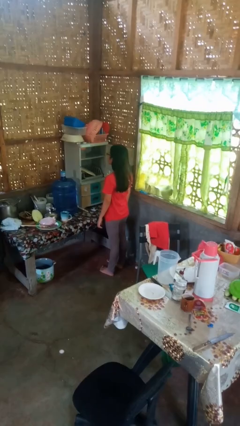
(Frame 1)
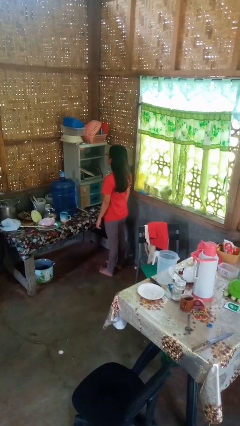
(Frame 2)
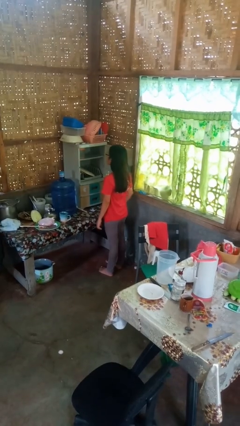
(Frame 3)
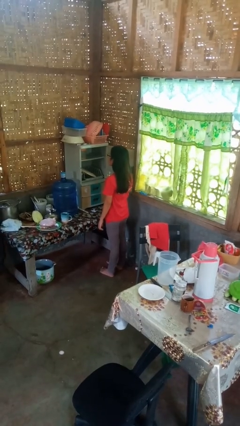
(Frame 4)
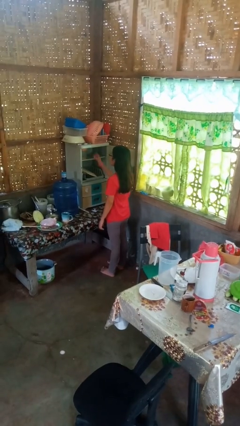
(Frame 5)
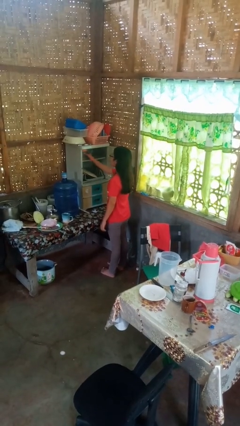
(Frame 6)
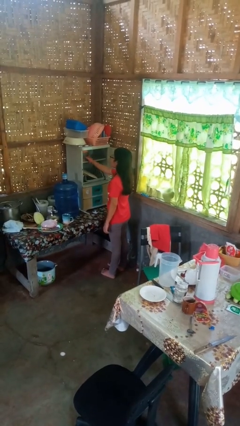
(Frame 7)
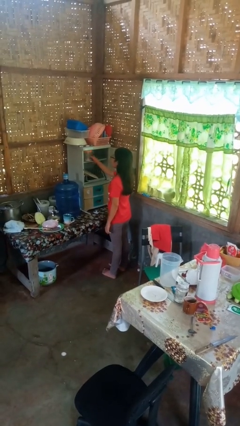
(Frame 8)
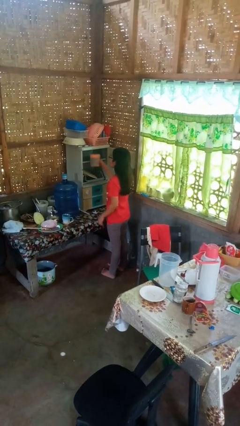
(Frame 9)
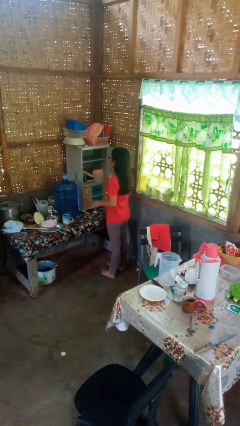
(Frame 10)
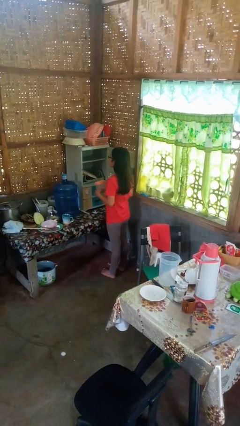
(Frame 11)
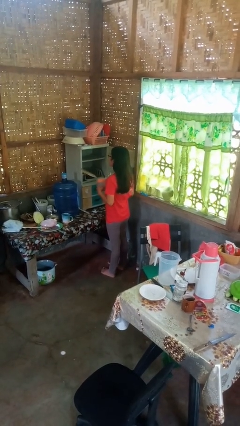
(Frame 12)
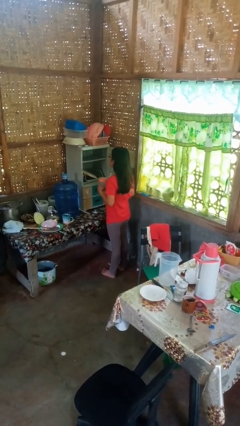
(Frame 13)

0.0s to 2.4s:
person picks up object from cabinet

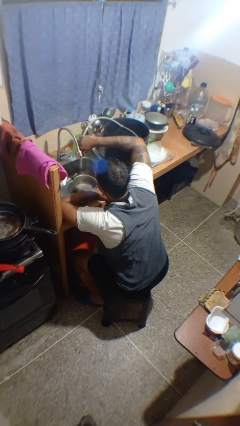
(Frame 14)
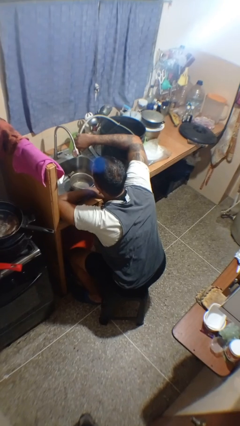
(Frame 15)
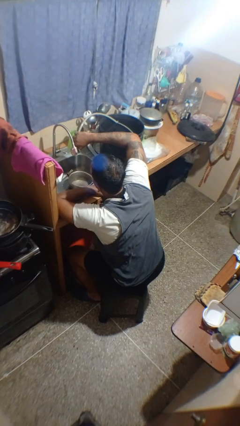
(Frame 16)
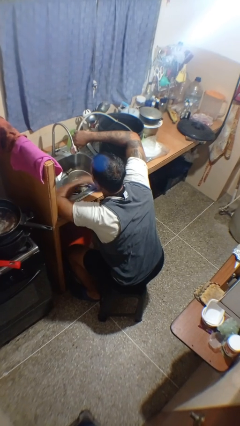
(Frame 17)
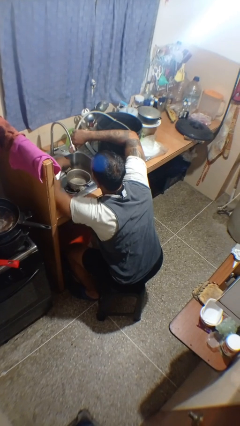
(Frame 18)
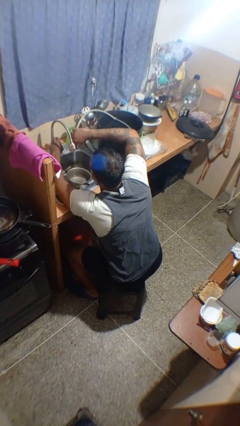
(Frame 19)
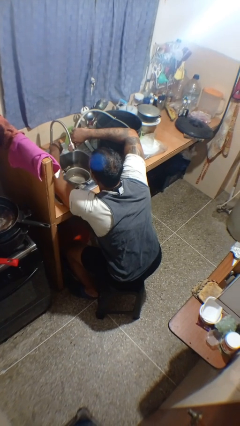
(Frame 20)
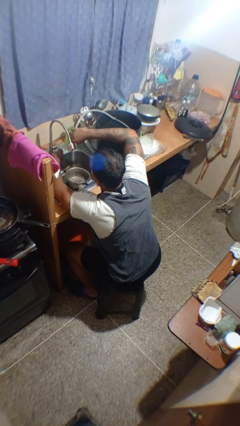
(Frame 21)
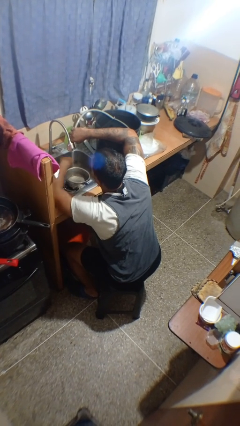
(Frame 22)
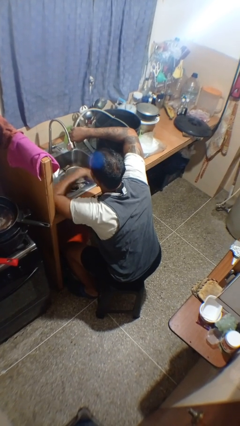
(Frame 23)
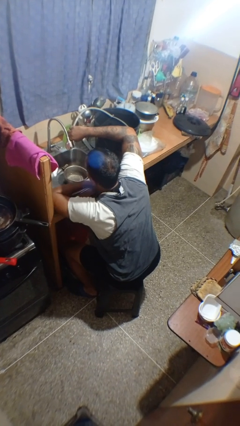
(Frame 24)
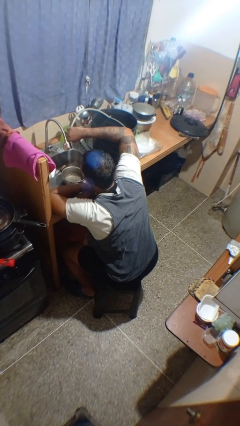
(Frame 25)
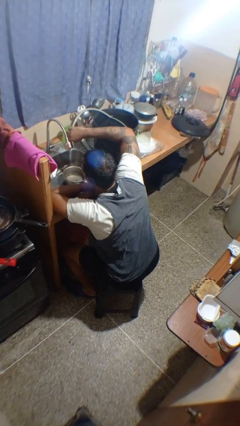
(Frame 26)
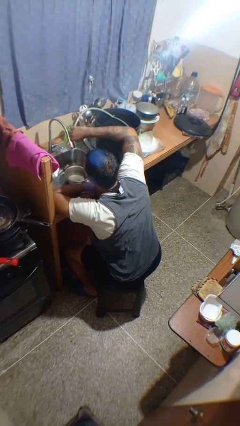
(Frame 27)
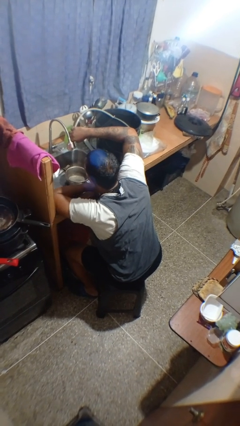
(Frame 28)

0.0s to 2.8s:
person turns on faucet

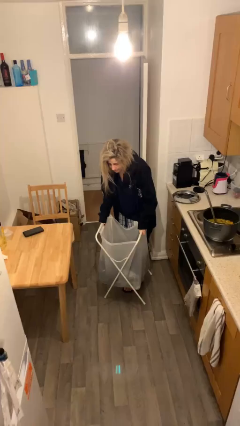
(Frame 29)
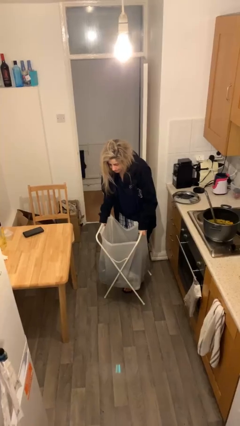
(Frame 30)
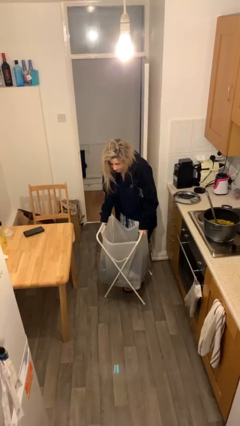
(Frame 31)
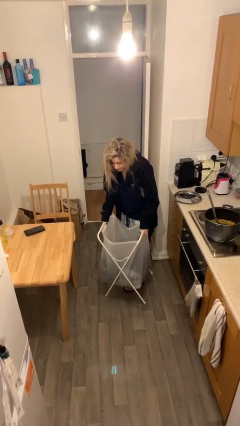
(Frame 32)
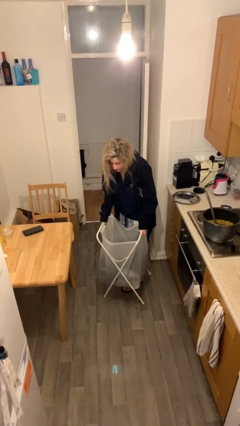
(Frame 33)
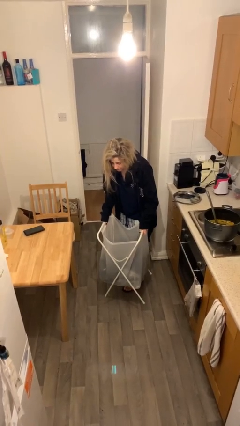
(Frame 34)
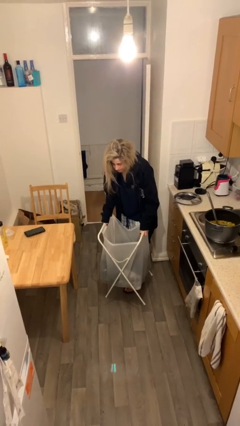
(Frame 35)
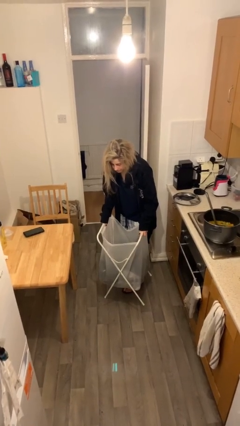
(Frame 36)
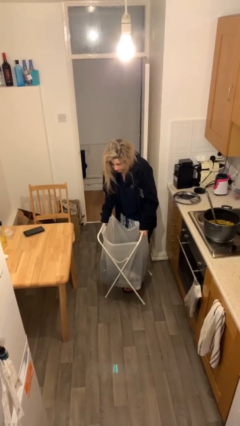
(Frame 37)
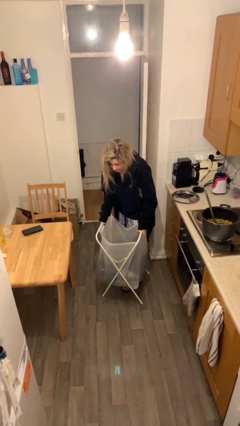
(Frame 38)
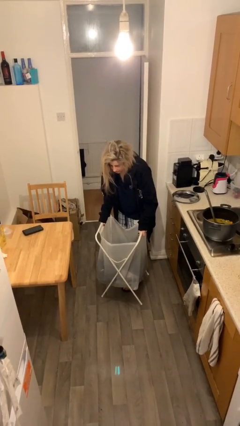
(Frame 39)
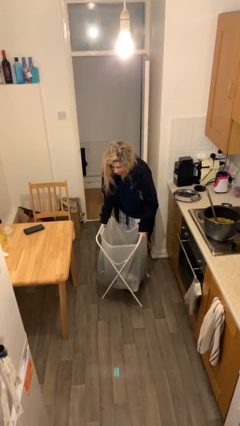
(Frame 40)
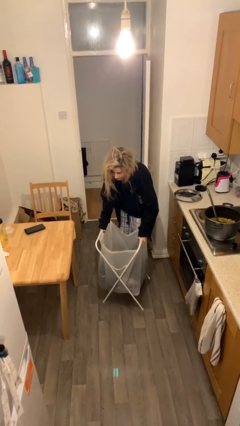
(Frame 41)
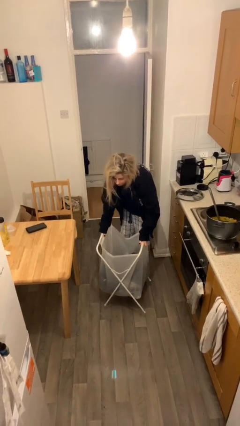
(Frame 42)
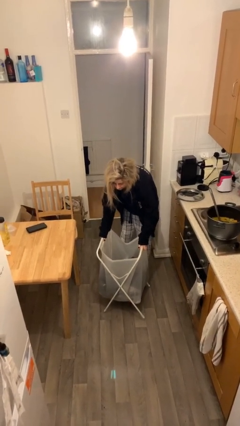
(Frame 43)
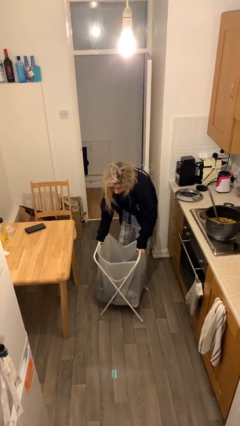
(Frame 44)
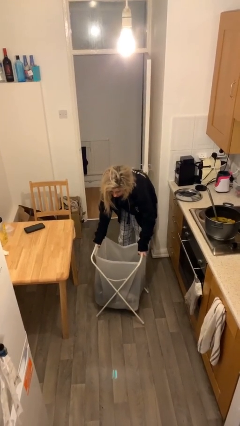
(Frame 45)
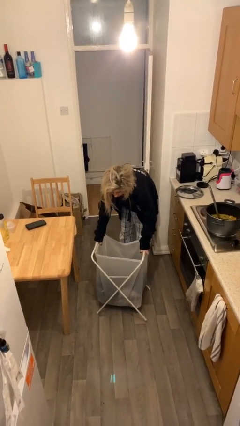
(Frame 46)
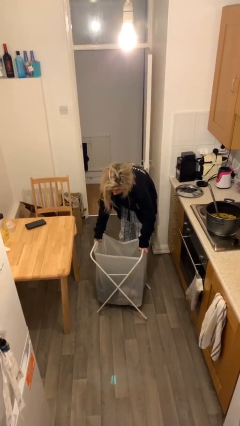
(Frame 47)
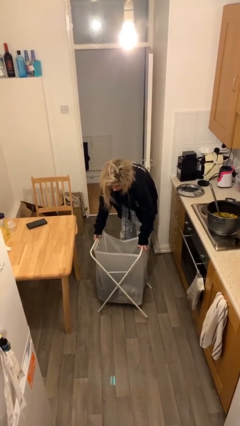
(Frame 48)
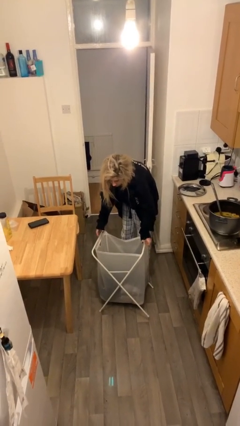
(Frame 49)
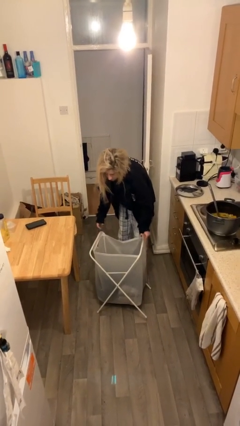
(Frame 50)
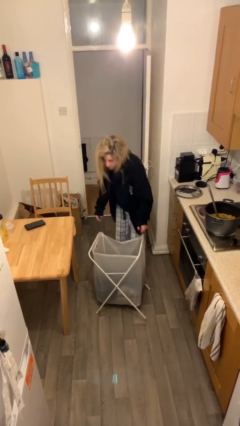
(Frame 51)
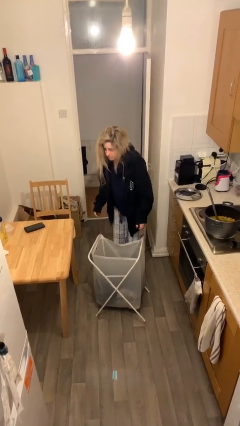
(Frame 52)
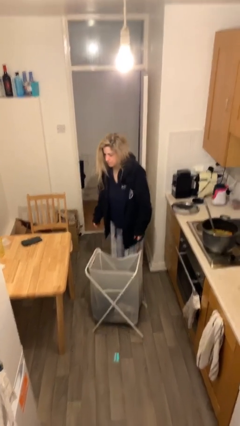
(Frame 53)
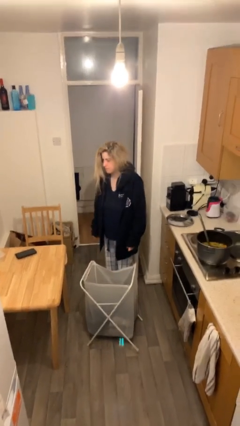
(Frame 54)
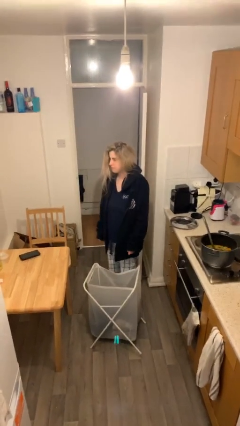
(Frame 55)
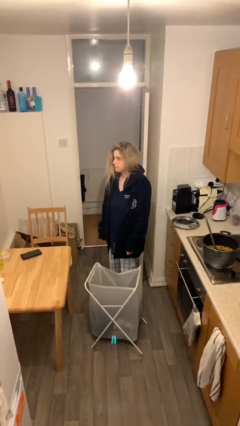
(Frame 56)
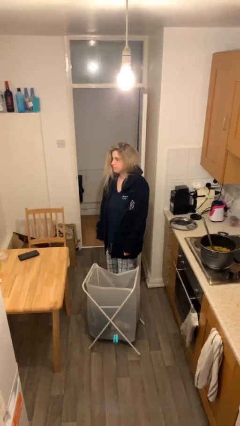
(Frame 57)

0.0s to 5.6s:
person puts down object on floor

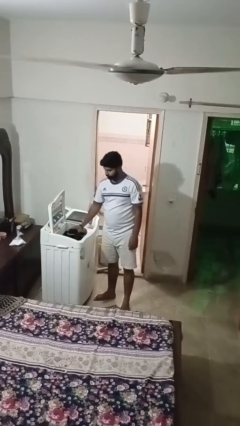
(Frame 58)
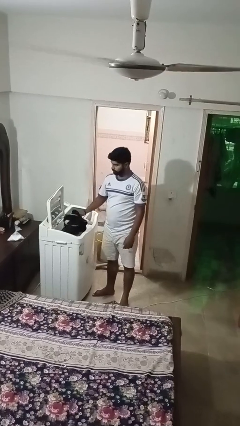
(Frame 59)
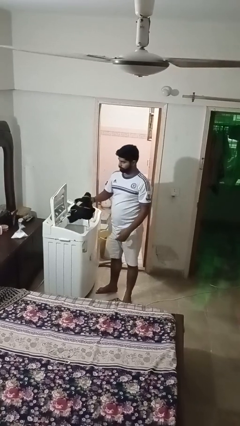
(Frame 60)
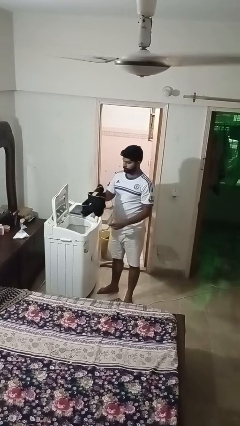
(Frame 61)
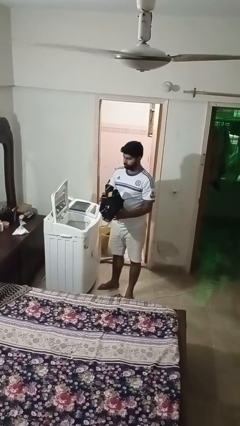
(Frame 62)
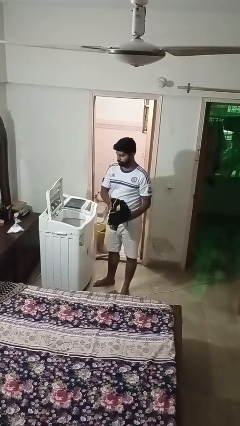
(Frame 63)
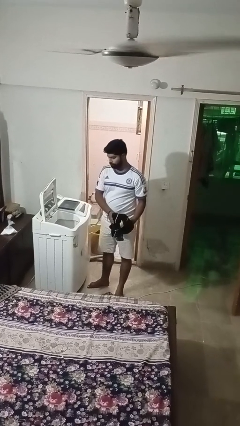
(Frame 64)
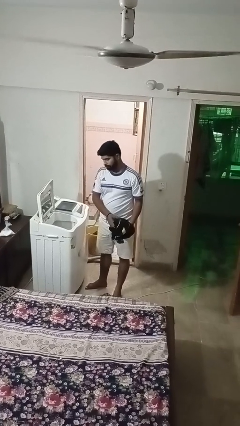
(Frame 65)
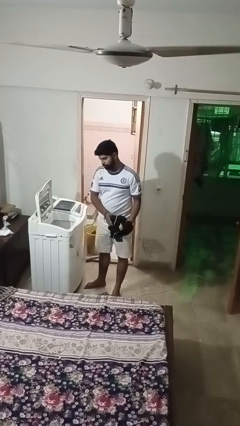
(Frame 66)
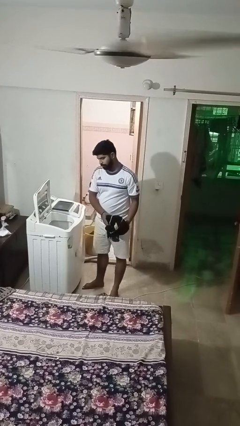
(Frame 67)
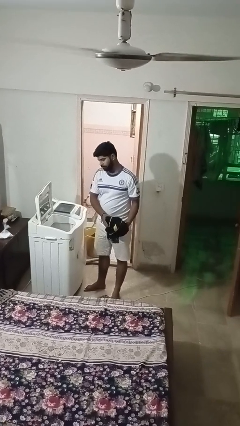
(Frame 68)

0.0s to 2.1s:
person unloads clotheswasher

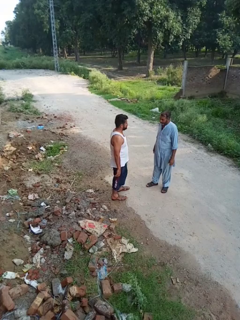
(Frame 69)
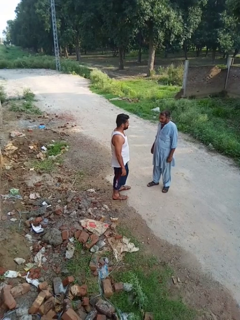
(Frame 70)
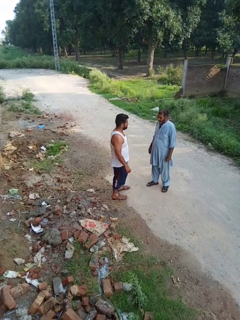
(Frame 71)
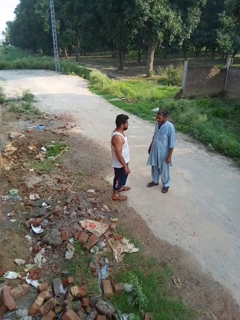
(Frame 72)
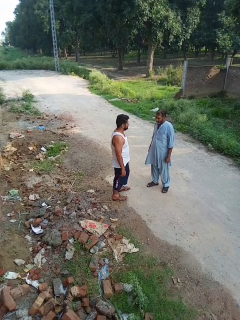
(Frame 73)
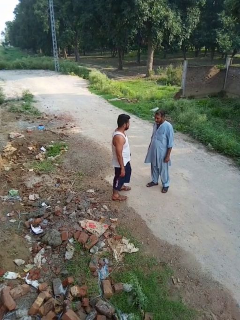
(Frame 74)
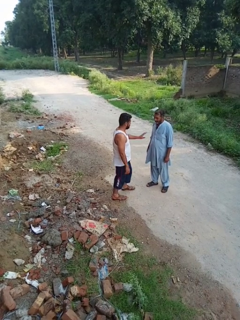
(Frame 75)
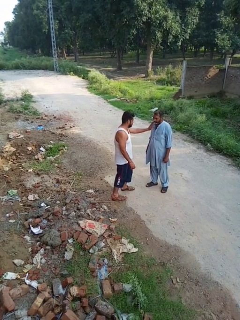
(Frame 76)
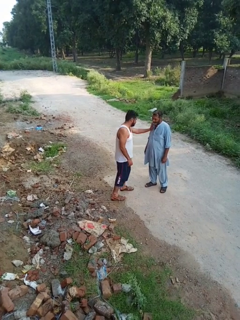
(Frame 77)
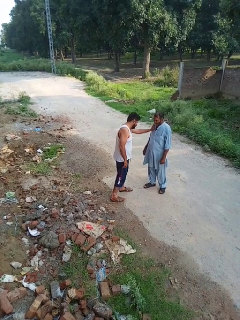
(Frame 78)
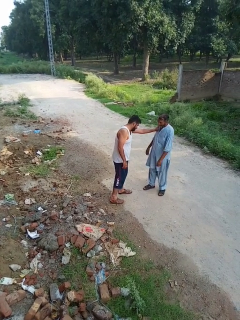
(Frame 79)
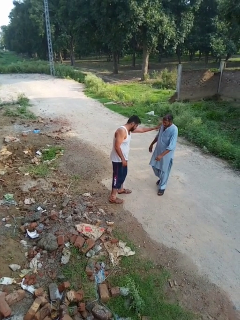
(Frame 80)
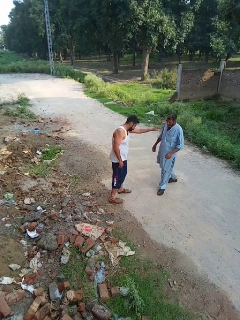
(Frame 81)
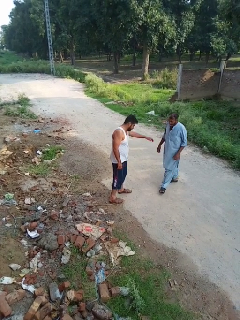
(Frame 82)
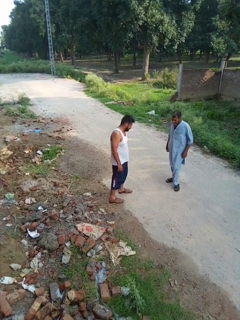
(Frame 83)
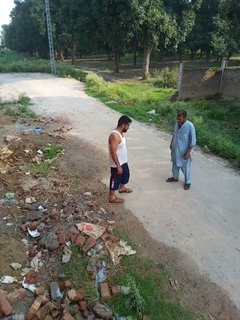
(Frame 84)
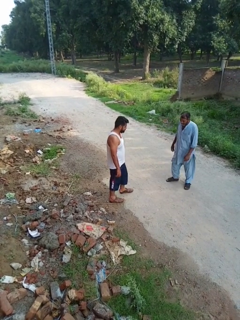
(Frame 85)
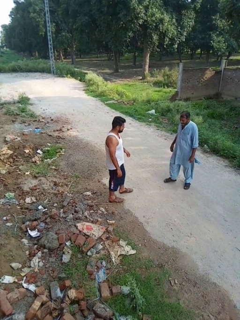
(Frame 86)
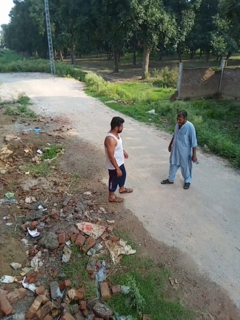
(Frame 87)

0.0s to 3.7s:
person shoves person

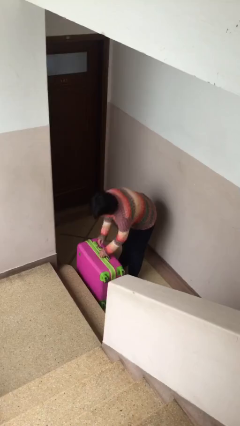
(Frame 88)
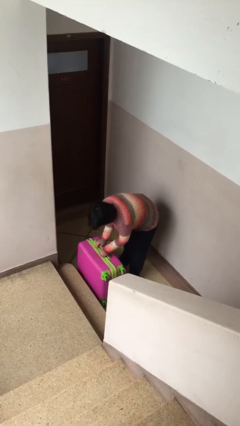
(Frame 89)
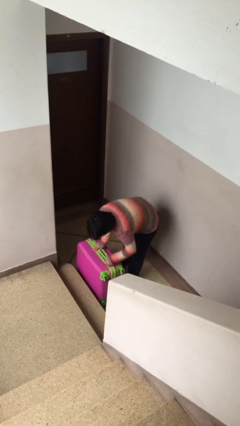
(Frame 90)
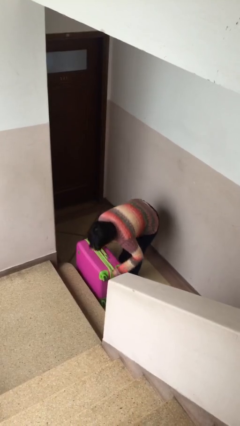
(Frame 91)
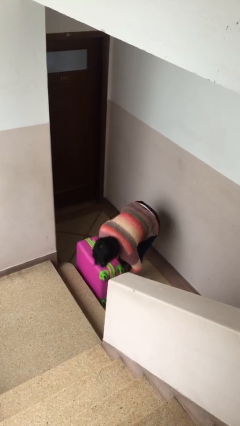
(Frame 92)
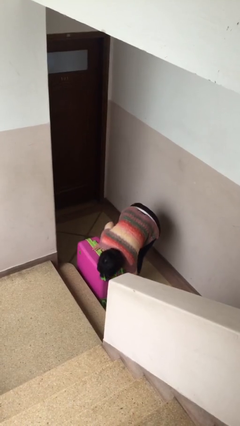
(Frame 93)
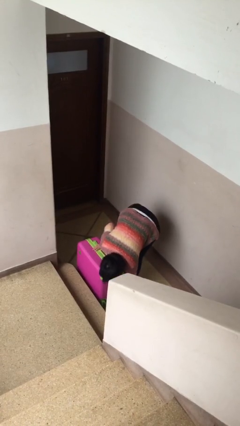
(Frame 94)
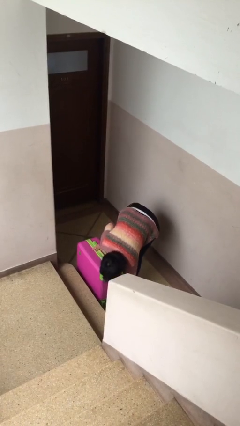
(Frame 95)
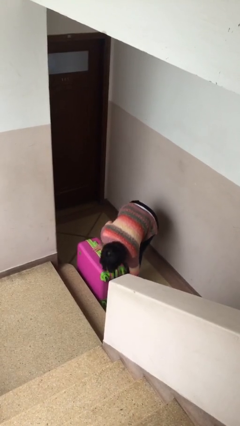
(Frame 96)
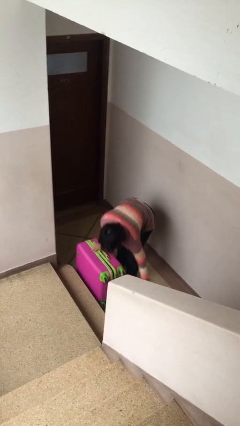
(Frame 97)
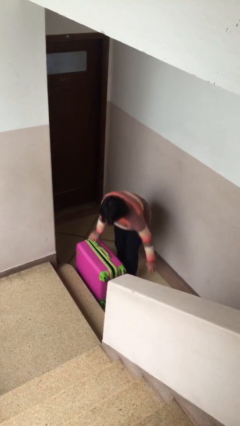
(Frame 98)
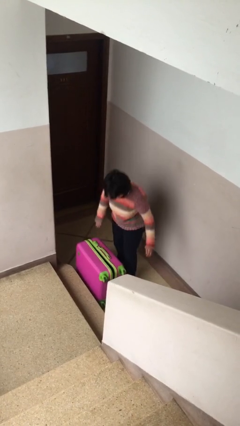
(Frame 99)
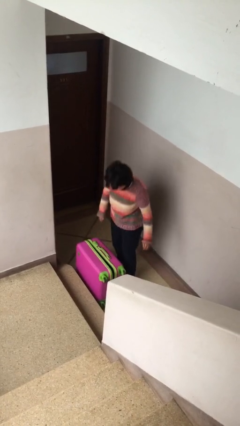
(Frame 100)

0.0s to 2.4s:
person opens suitcase
